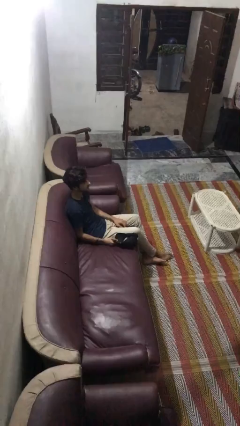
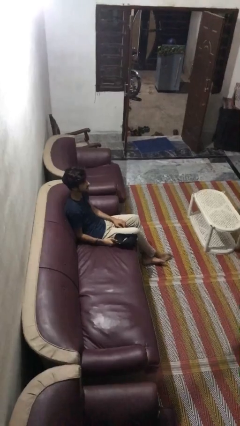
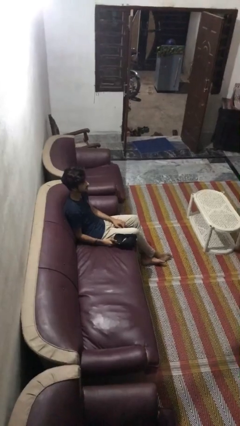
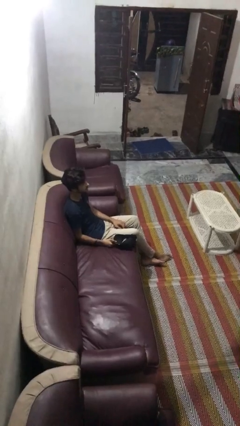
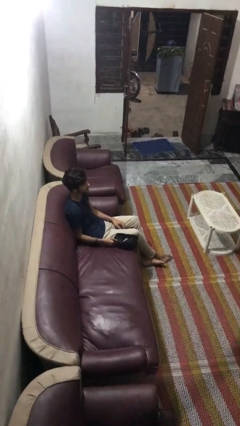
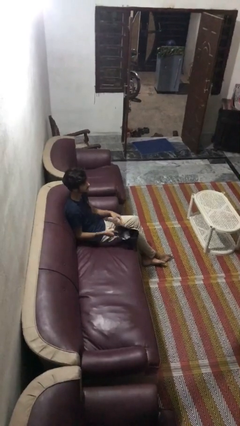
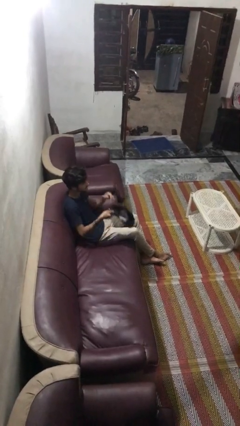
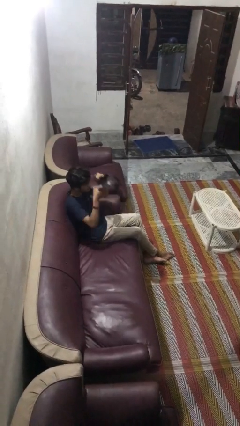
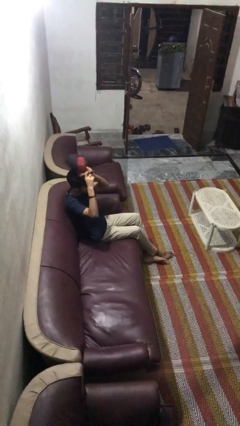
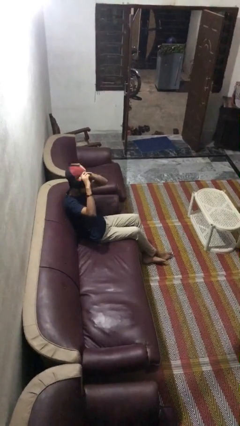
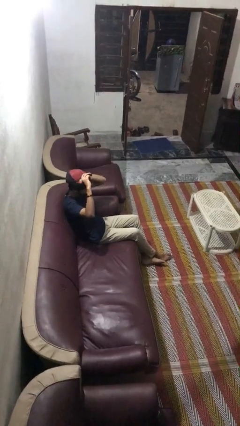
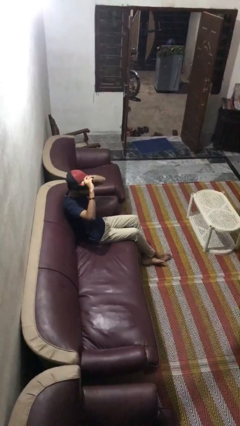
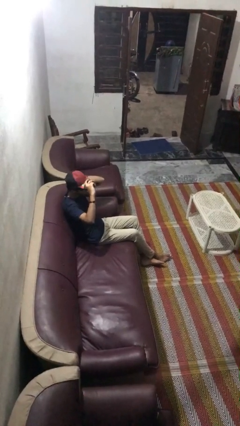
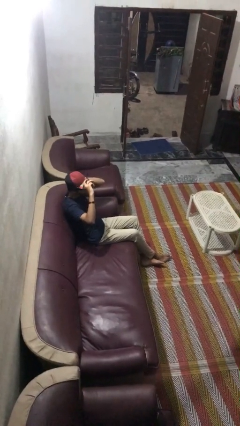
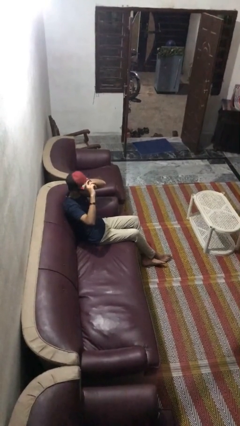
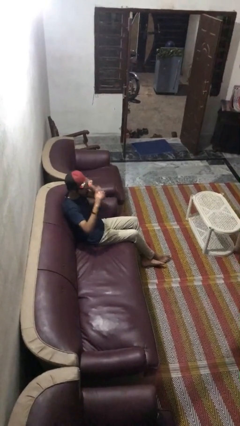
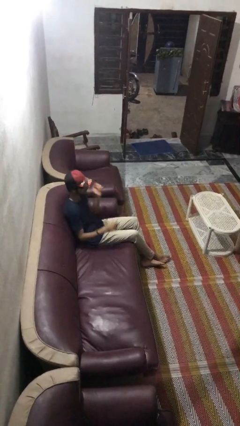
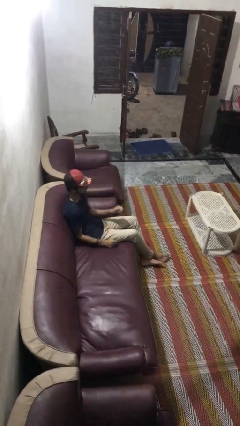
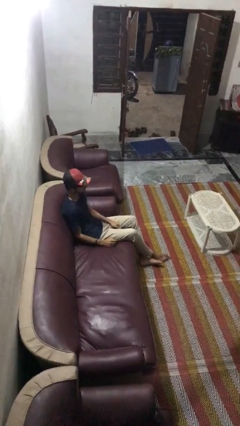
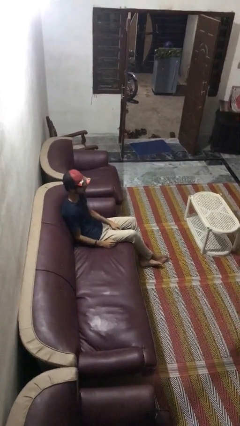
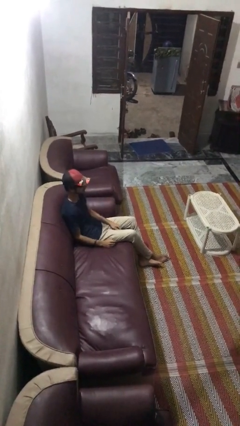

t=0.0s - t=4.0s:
person puts on hat

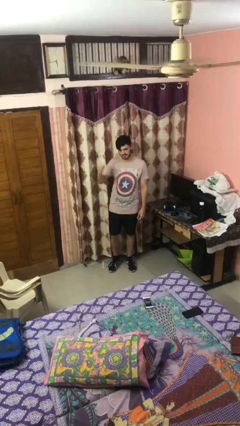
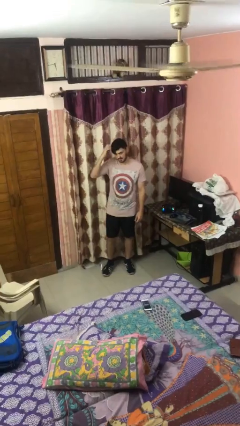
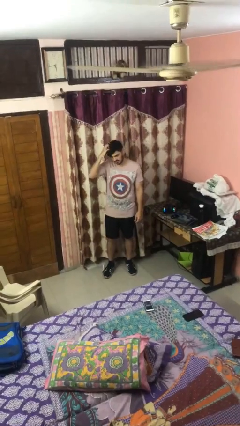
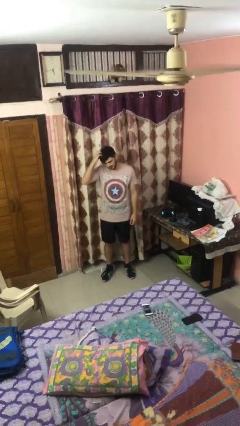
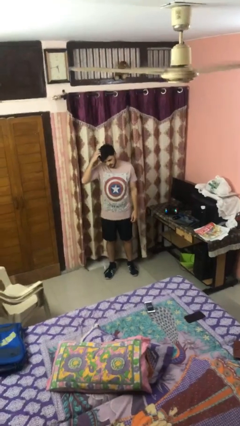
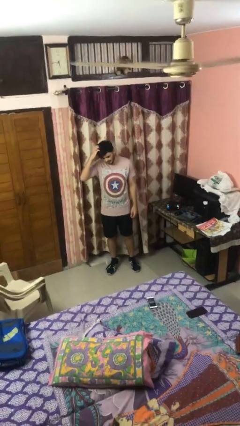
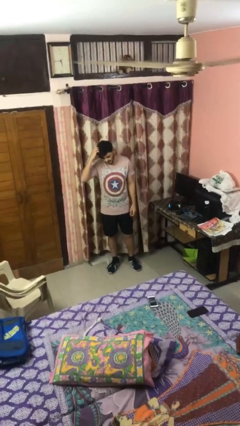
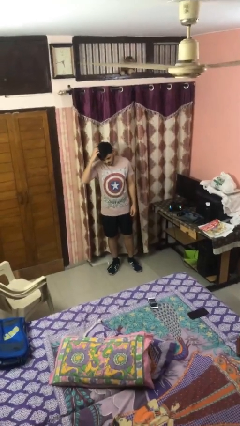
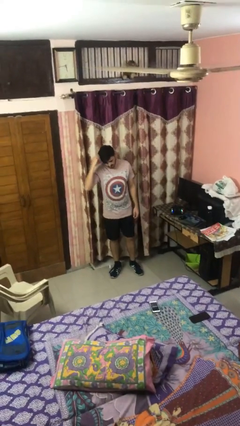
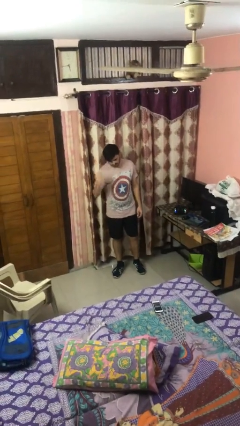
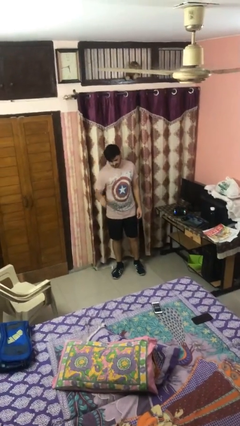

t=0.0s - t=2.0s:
person scratches face

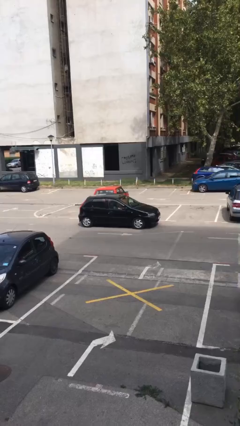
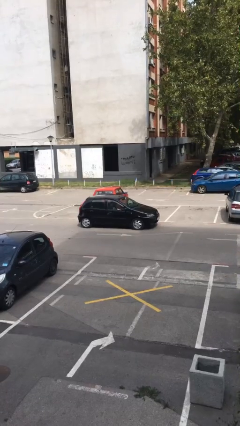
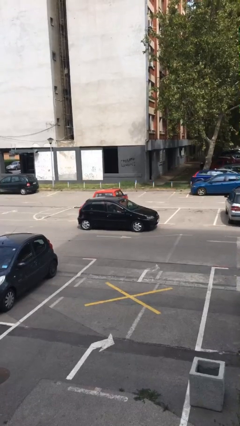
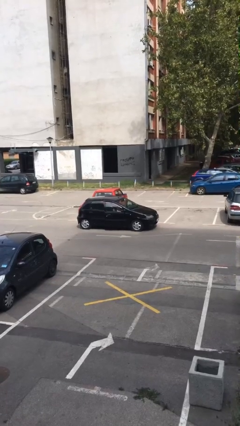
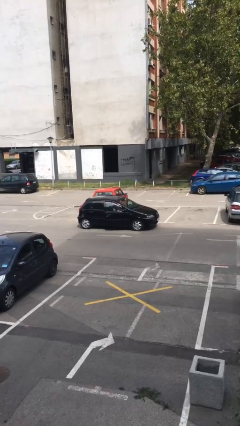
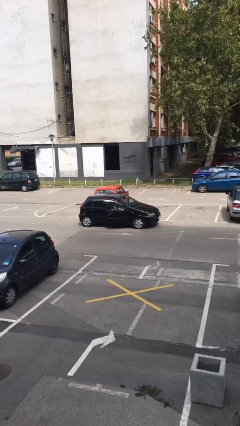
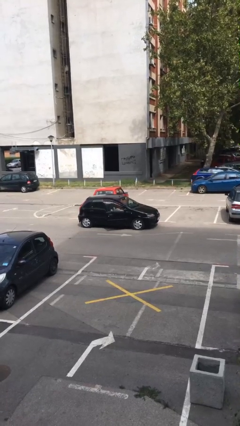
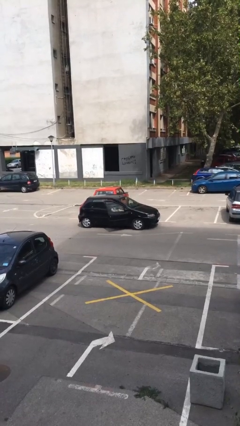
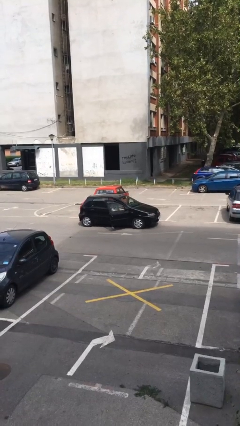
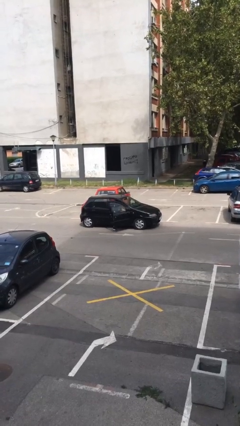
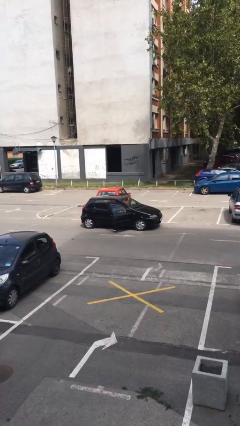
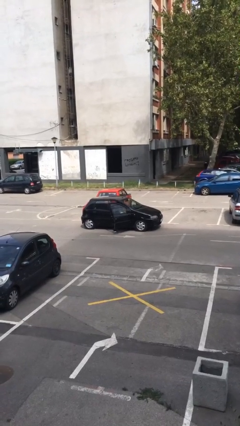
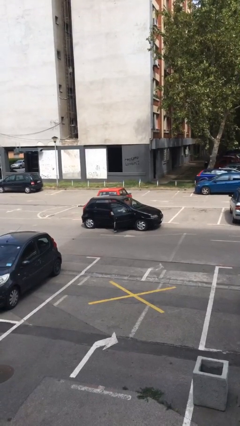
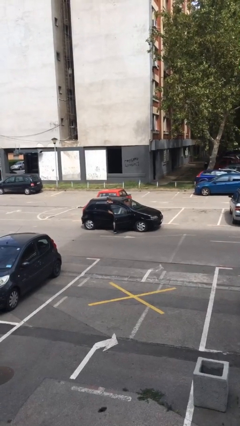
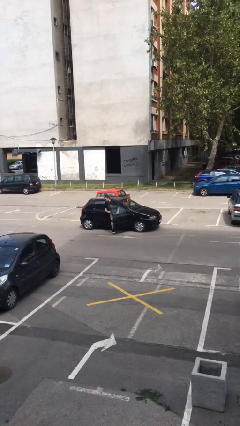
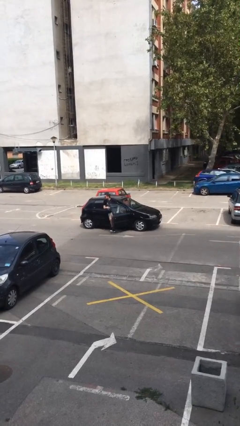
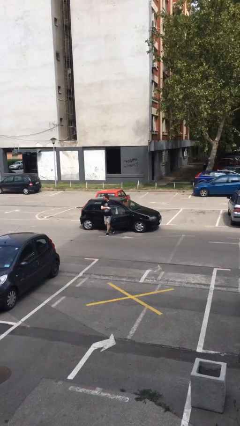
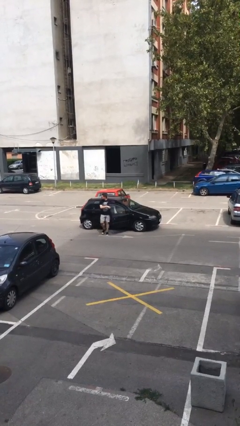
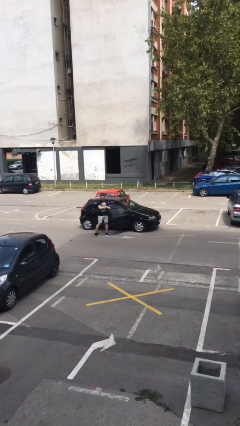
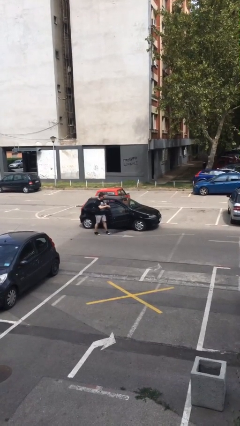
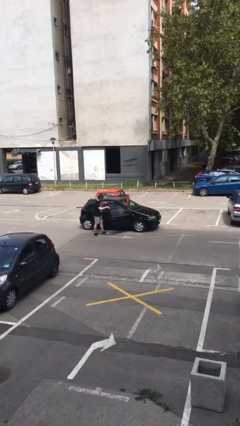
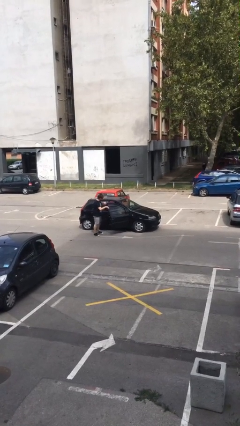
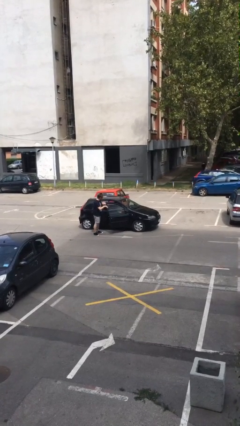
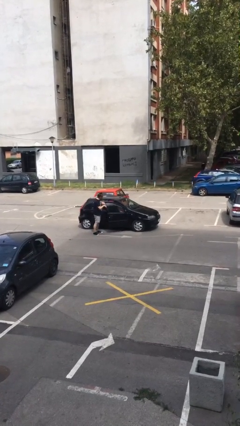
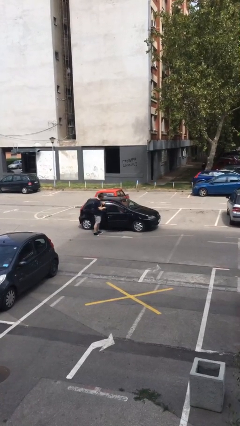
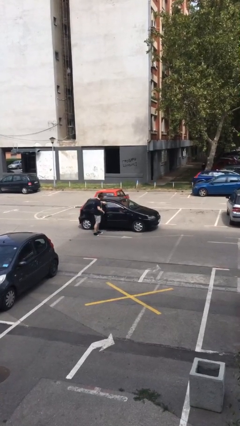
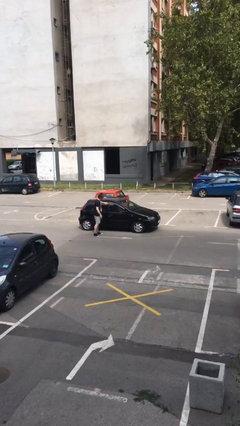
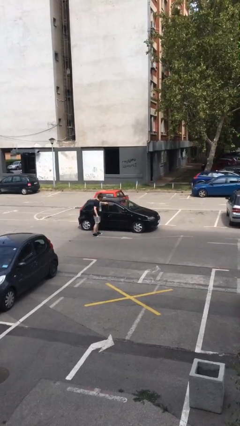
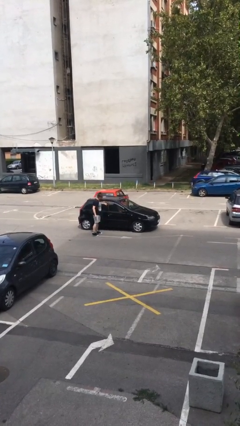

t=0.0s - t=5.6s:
car drops off person

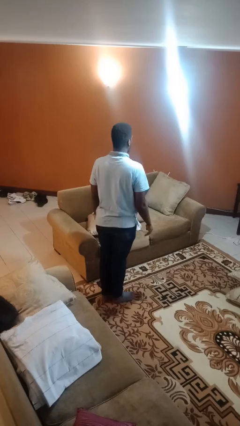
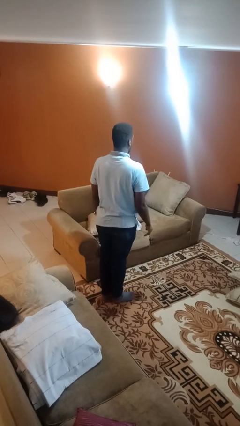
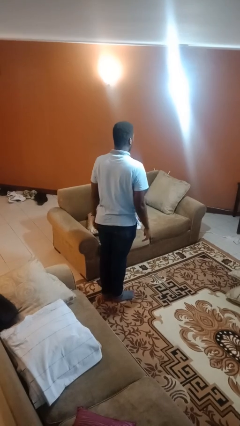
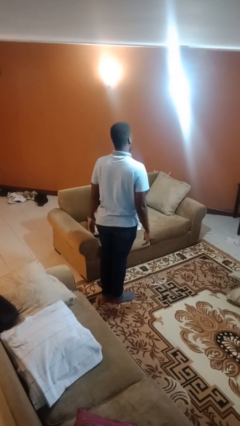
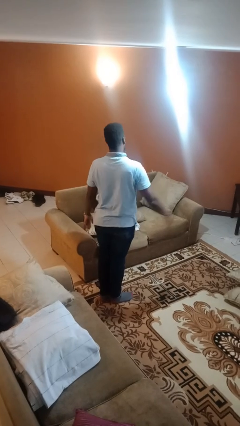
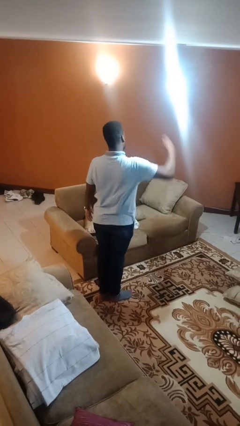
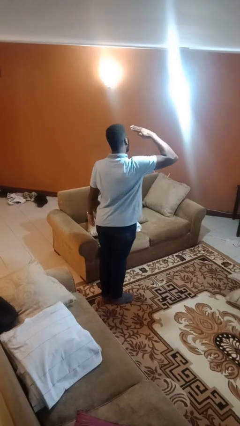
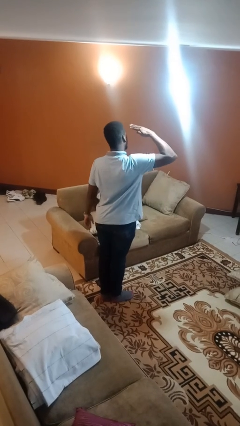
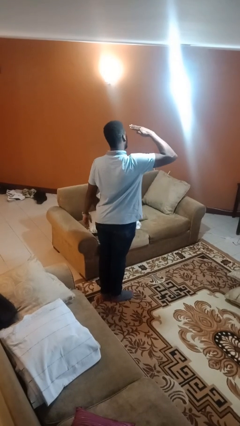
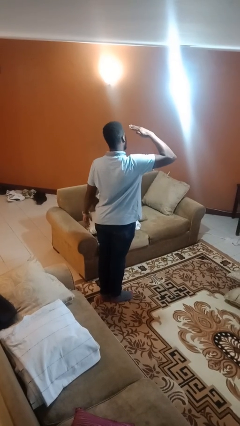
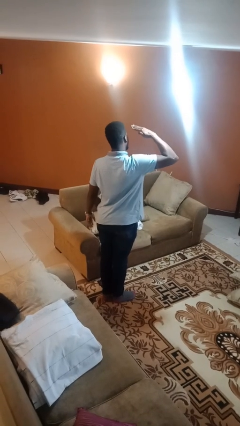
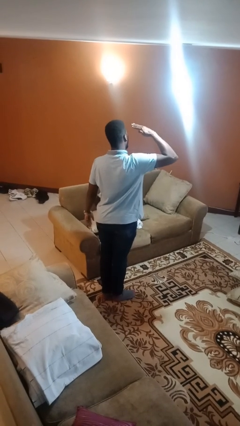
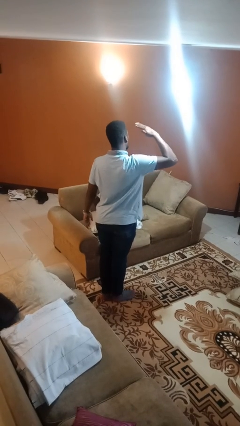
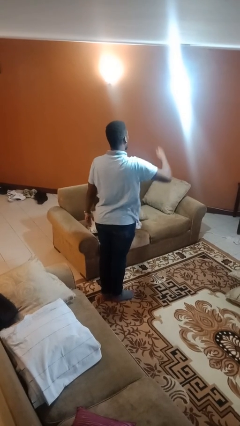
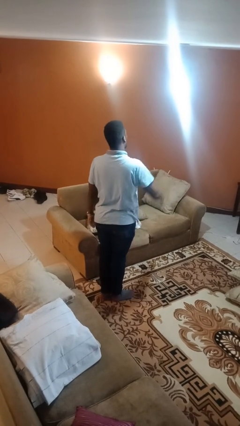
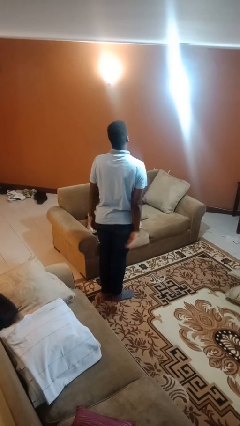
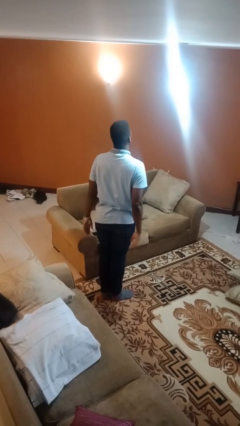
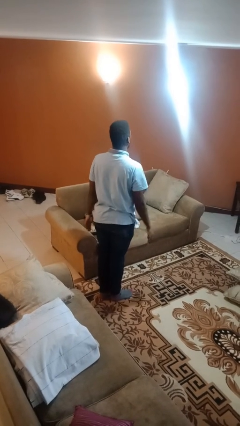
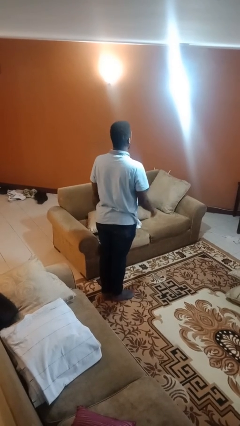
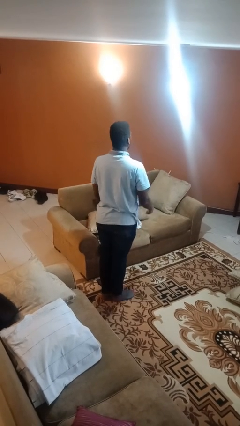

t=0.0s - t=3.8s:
person salutes

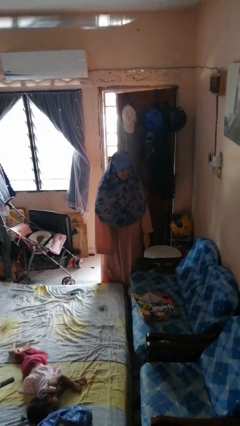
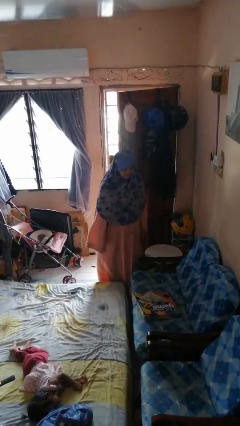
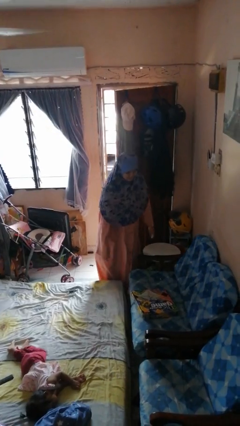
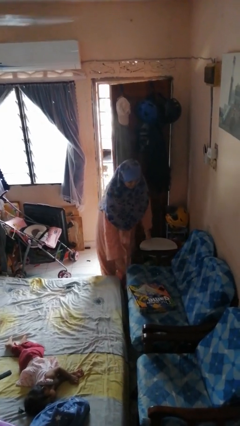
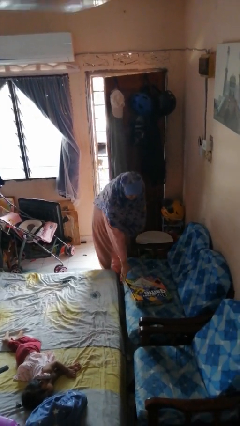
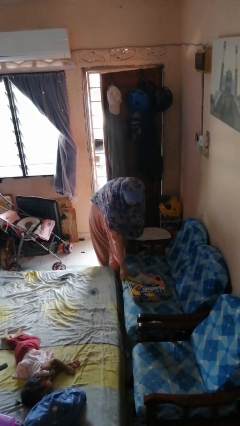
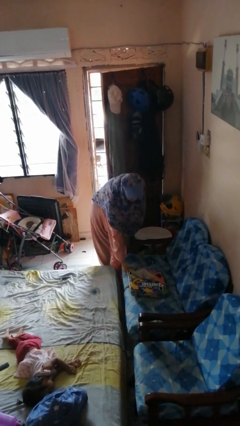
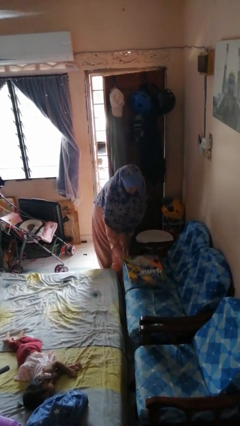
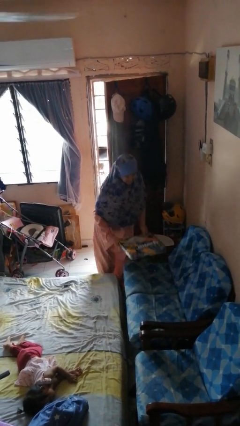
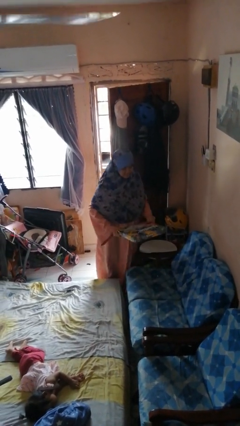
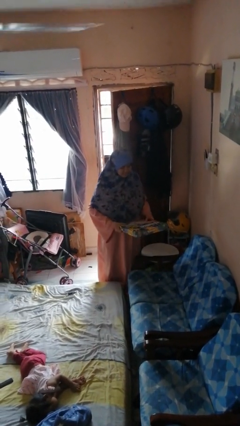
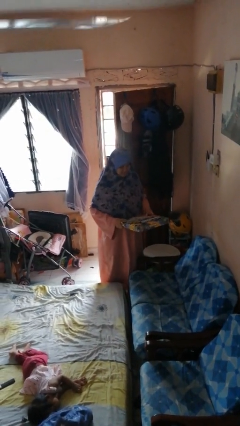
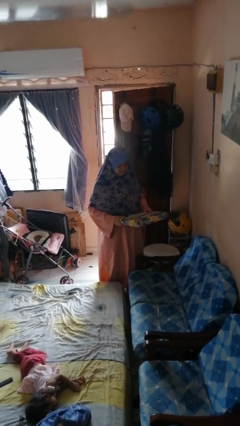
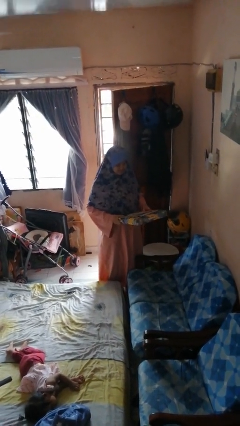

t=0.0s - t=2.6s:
person picks up object from couch
